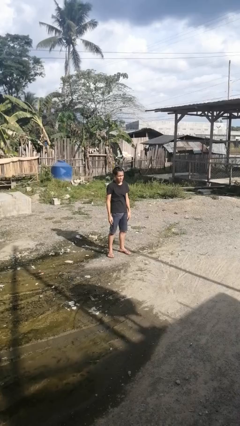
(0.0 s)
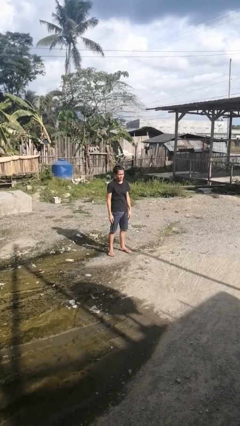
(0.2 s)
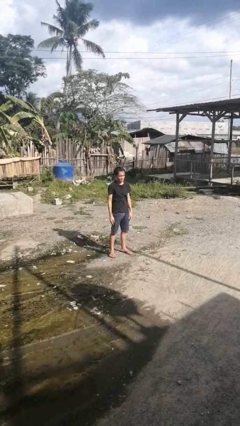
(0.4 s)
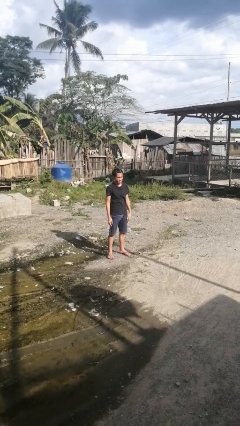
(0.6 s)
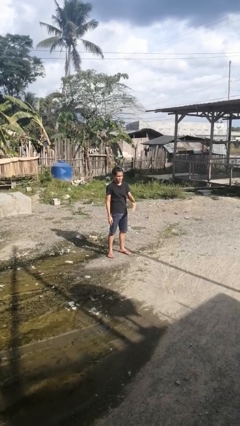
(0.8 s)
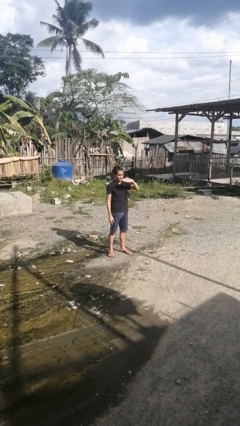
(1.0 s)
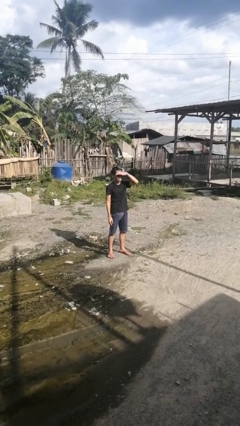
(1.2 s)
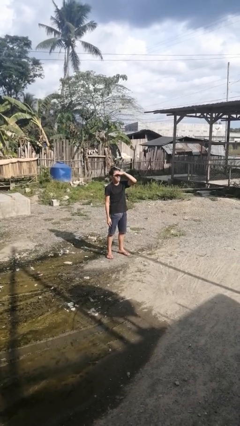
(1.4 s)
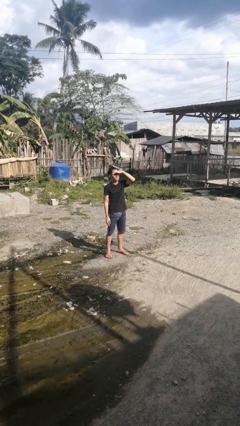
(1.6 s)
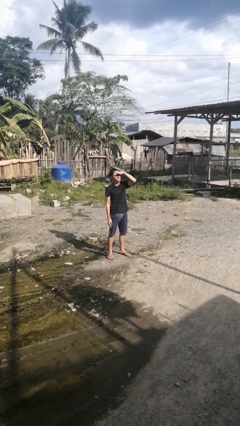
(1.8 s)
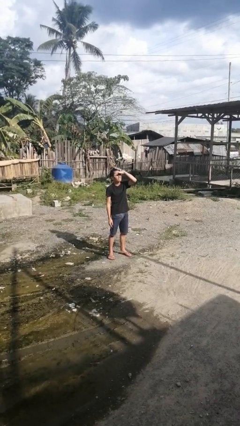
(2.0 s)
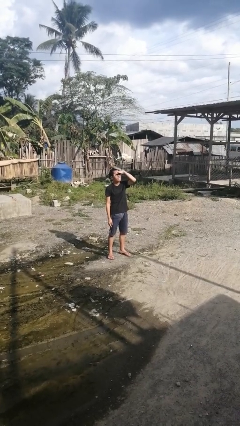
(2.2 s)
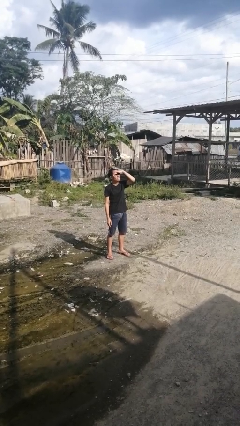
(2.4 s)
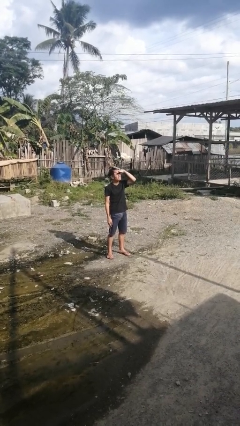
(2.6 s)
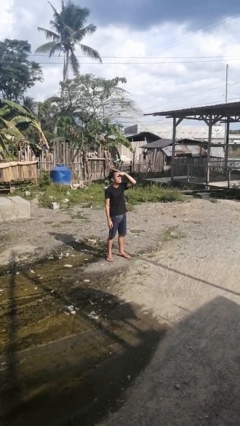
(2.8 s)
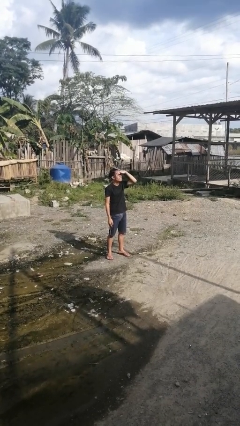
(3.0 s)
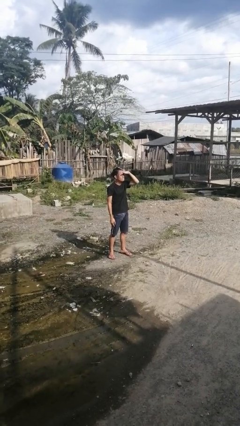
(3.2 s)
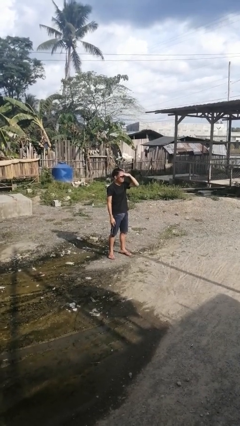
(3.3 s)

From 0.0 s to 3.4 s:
person shades eyes

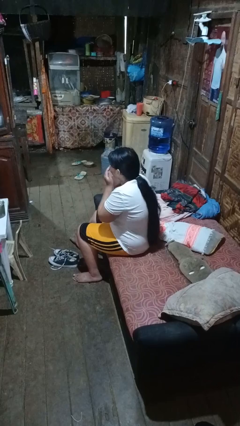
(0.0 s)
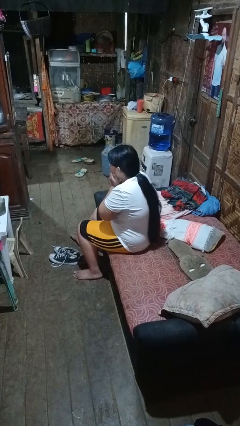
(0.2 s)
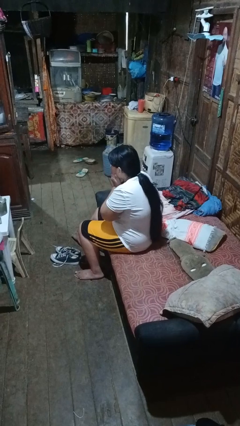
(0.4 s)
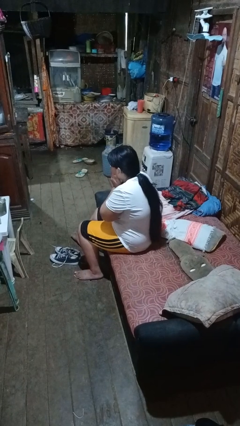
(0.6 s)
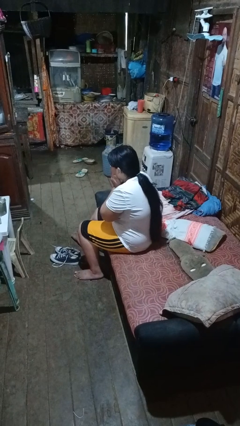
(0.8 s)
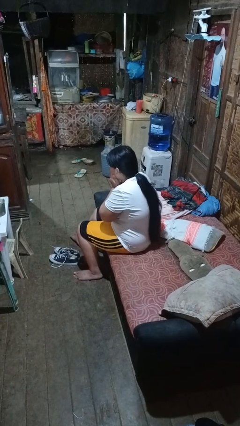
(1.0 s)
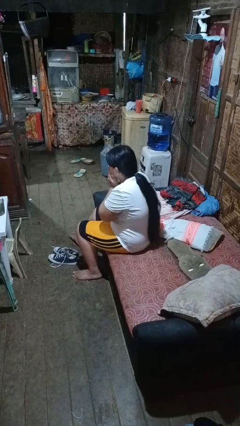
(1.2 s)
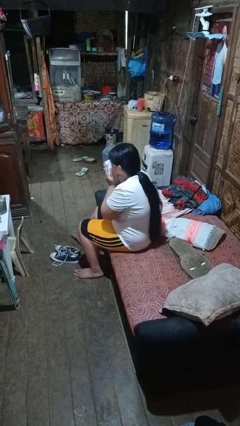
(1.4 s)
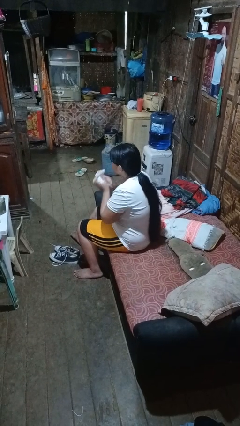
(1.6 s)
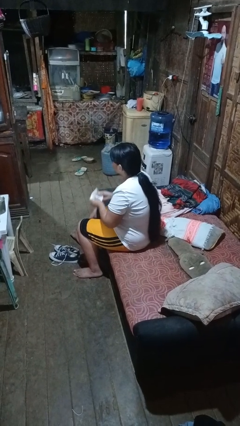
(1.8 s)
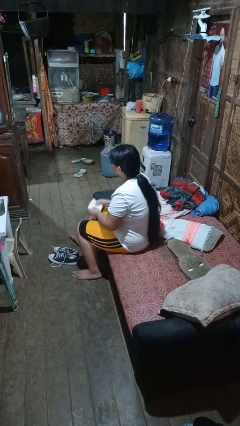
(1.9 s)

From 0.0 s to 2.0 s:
person blows nose

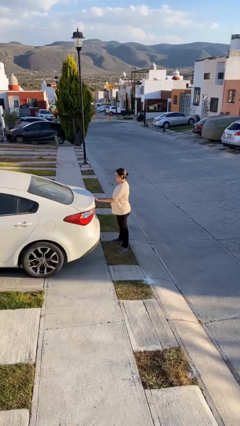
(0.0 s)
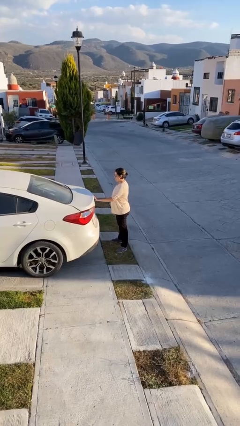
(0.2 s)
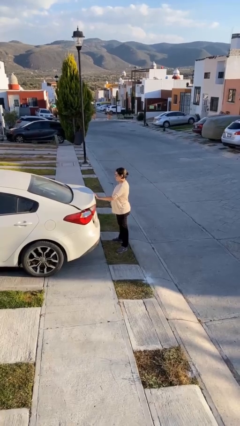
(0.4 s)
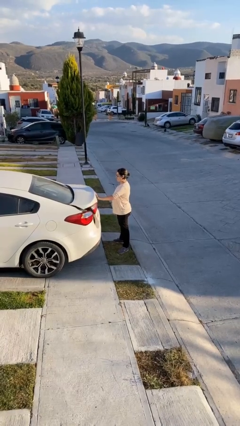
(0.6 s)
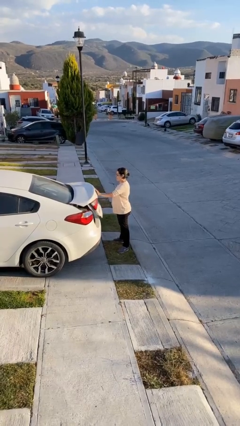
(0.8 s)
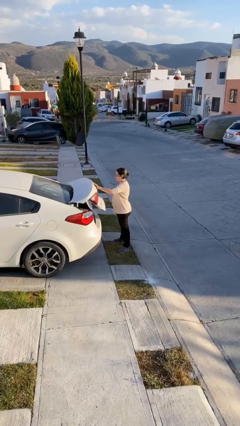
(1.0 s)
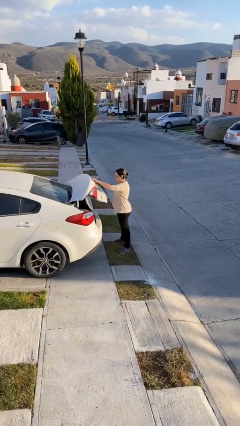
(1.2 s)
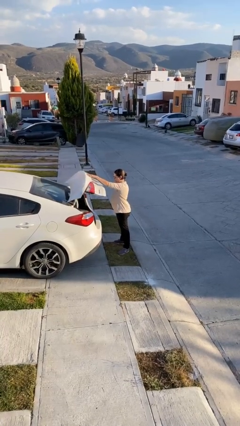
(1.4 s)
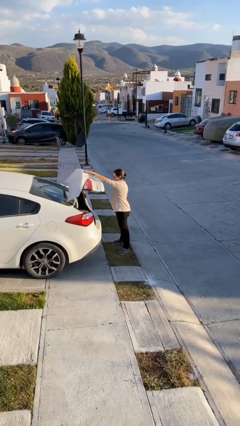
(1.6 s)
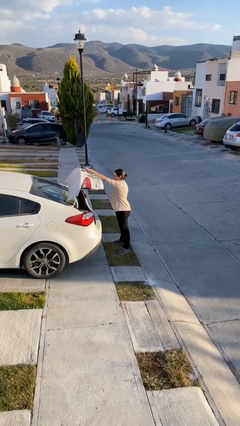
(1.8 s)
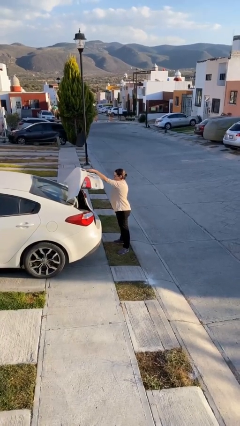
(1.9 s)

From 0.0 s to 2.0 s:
person opens car trunk

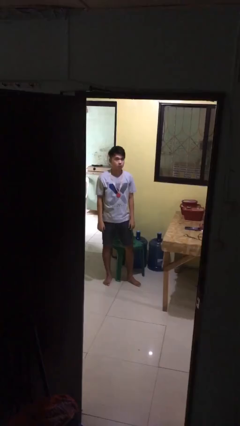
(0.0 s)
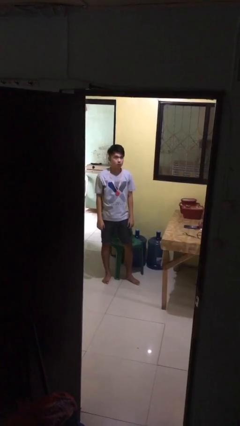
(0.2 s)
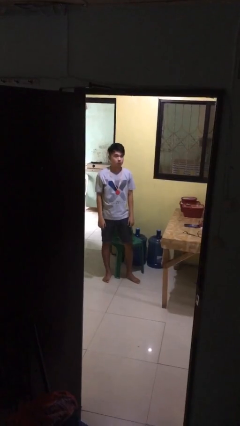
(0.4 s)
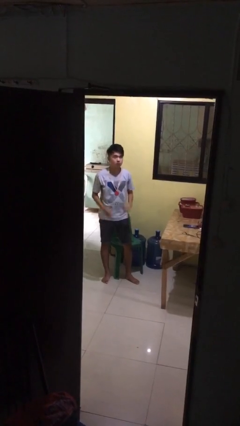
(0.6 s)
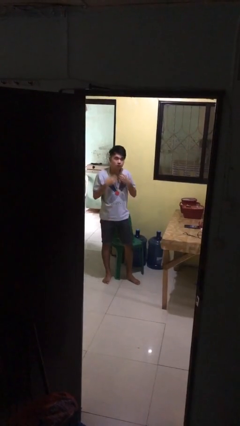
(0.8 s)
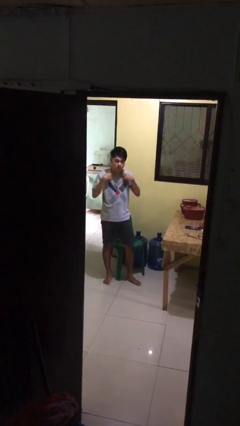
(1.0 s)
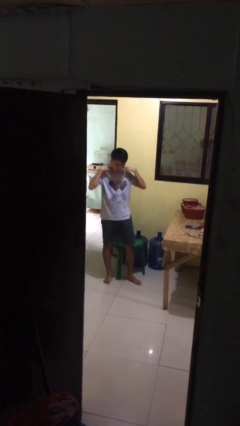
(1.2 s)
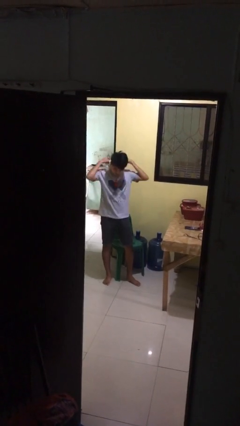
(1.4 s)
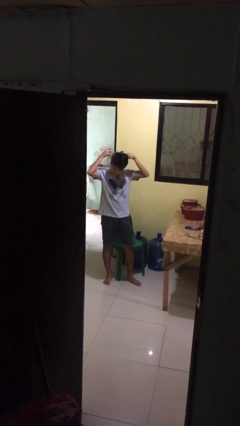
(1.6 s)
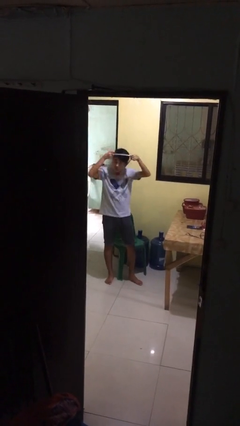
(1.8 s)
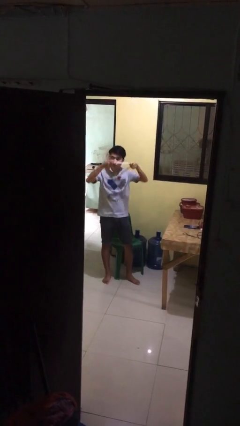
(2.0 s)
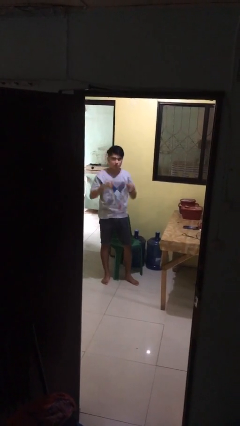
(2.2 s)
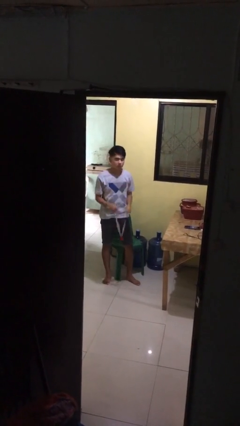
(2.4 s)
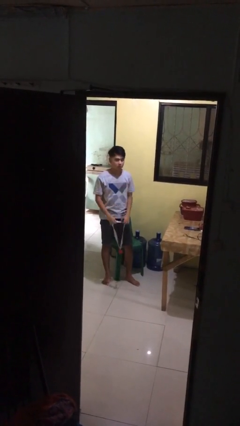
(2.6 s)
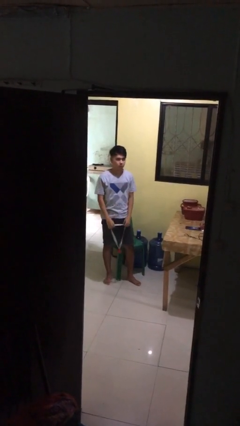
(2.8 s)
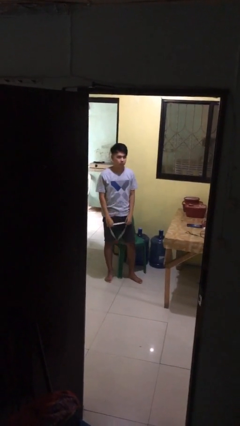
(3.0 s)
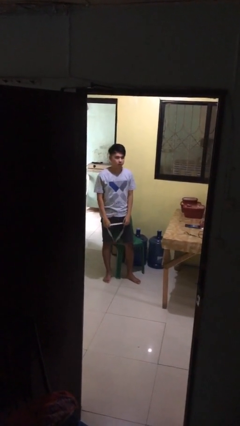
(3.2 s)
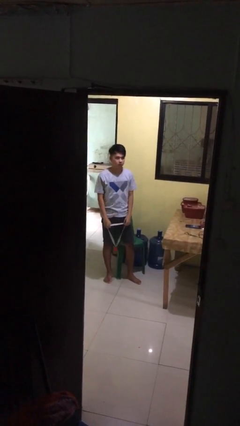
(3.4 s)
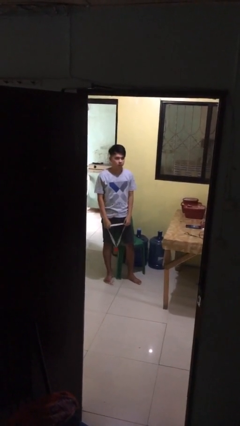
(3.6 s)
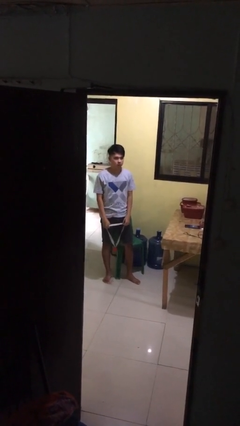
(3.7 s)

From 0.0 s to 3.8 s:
person takes off necklace

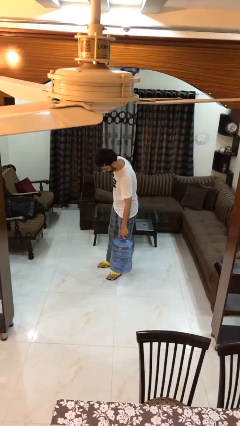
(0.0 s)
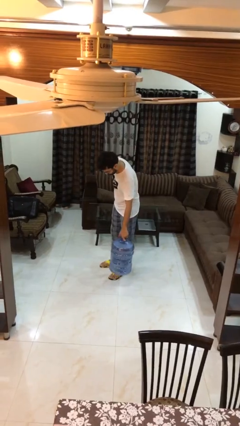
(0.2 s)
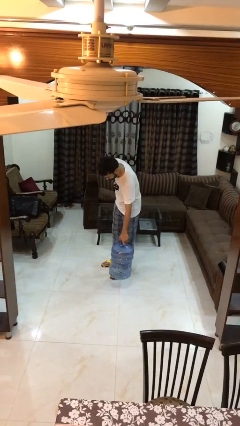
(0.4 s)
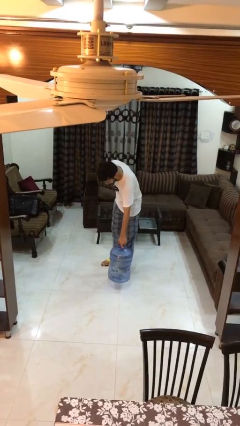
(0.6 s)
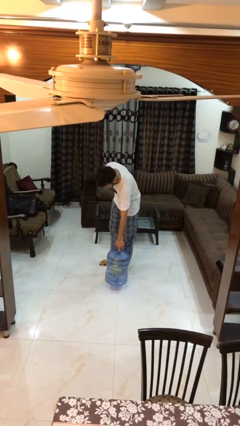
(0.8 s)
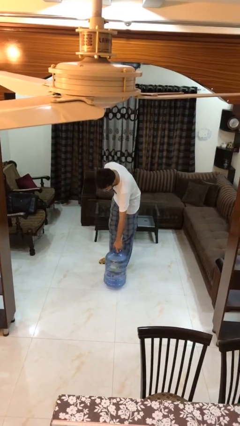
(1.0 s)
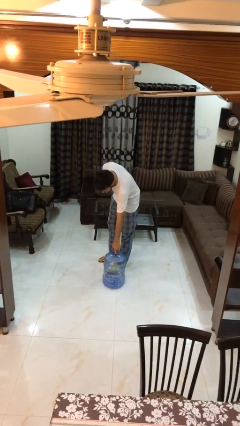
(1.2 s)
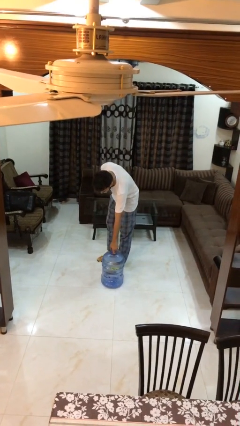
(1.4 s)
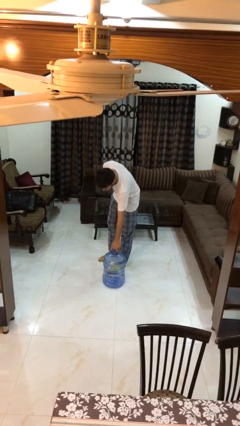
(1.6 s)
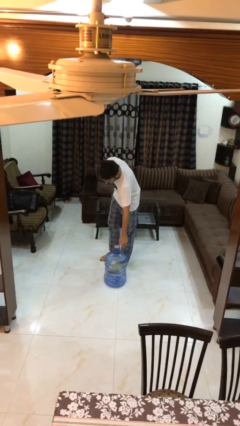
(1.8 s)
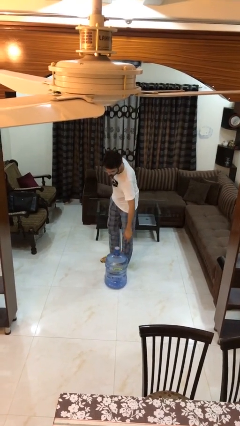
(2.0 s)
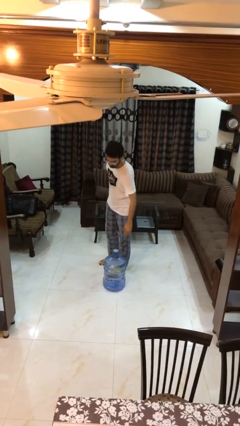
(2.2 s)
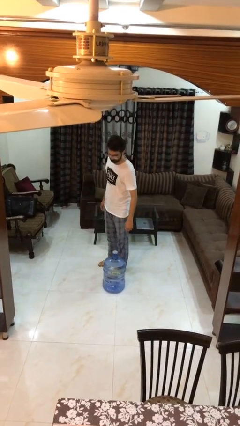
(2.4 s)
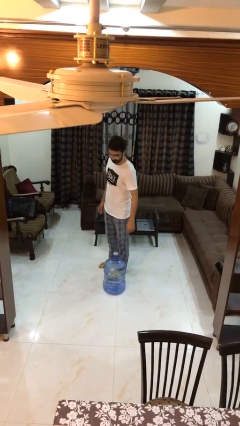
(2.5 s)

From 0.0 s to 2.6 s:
person puts down object on floor

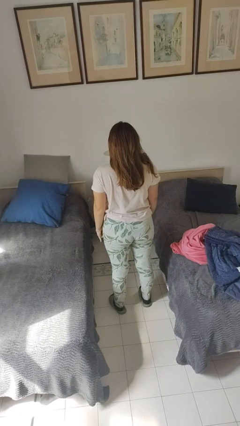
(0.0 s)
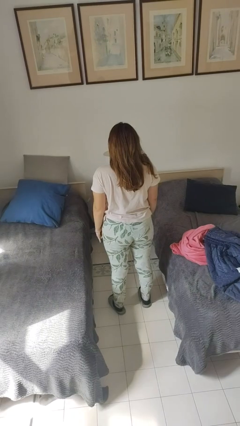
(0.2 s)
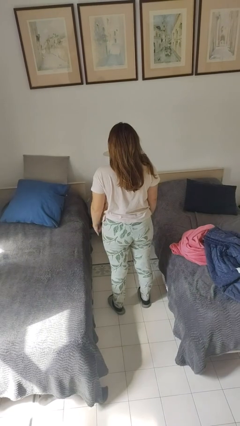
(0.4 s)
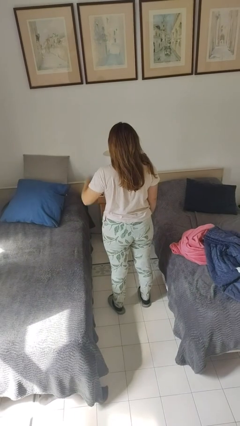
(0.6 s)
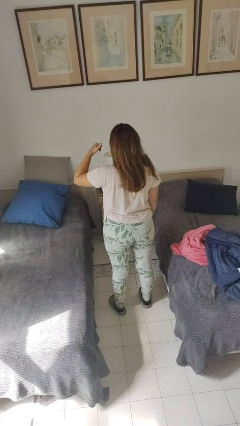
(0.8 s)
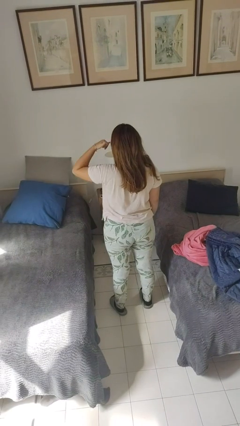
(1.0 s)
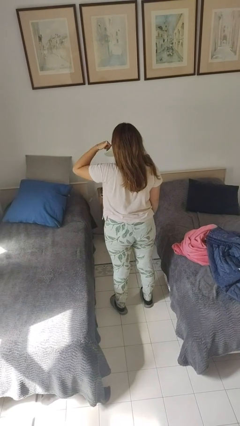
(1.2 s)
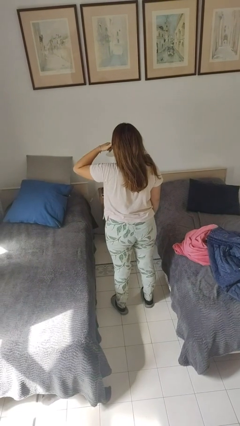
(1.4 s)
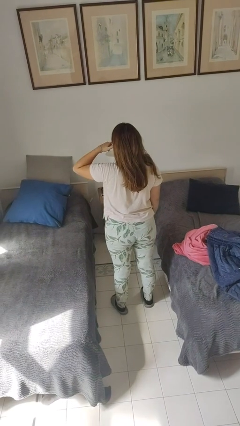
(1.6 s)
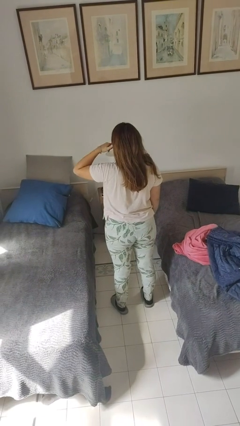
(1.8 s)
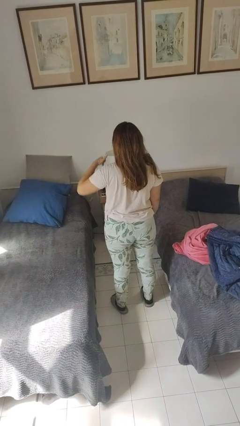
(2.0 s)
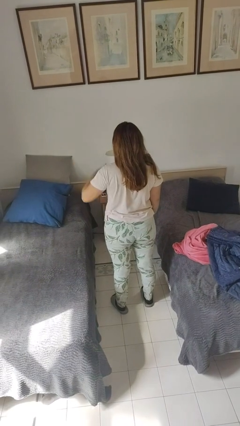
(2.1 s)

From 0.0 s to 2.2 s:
person gestures call me

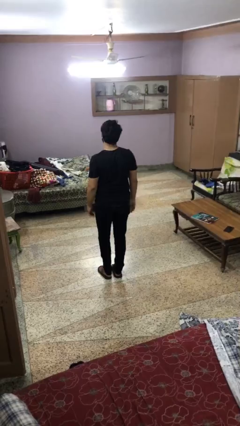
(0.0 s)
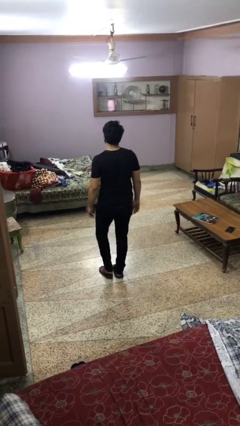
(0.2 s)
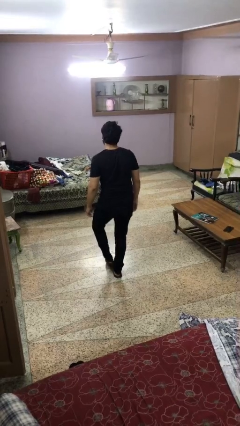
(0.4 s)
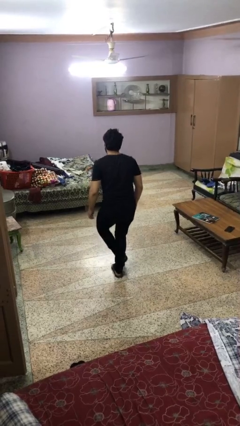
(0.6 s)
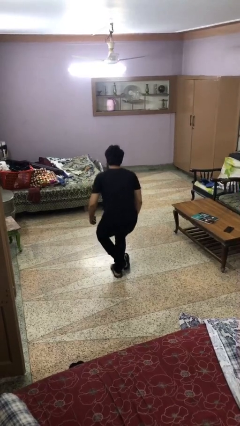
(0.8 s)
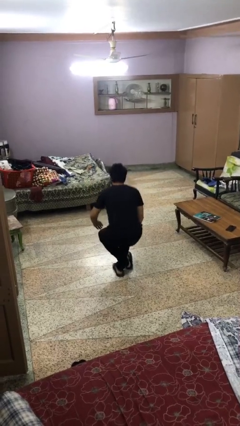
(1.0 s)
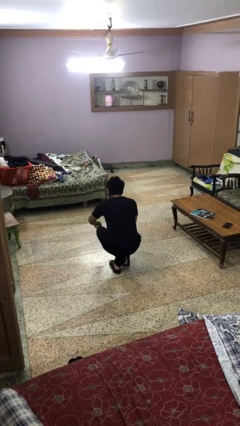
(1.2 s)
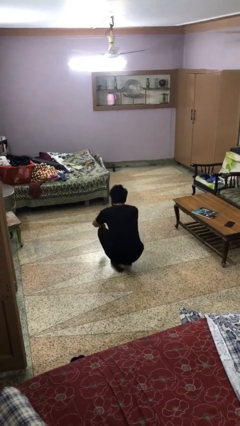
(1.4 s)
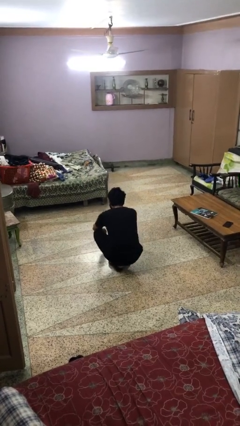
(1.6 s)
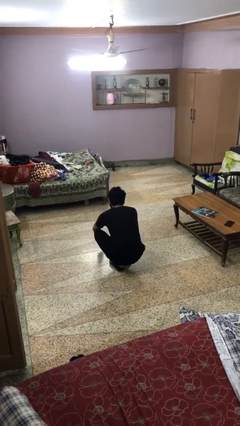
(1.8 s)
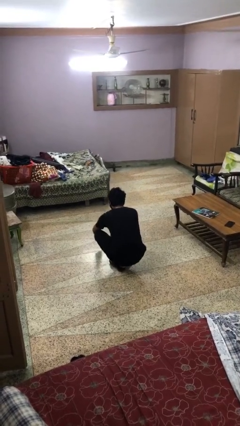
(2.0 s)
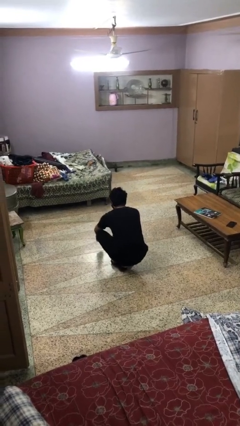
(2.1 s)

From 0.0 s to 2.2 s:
person sits crisscross
